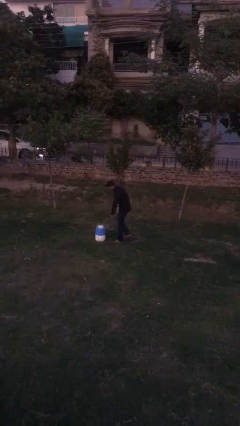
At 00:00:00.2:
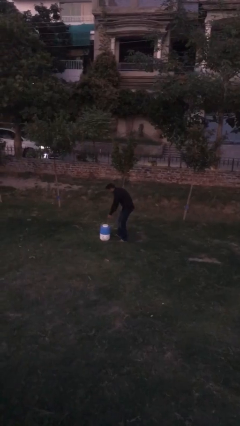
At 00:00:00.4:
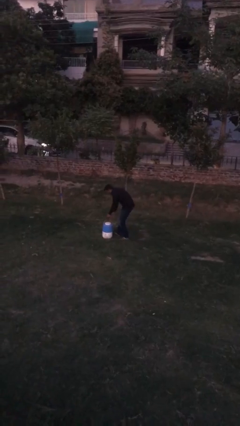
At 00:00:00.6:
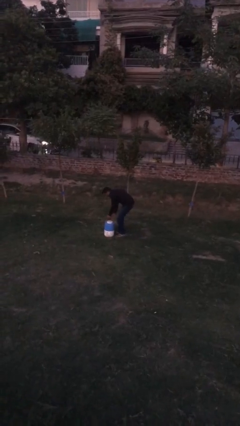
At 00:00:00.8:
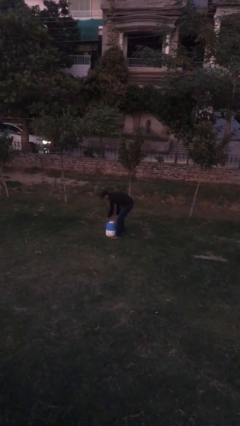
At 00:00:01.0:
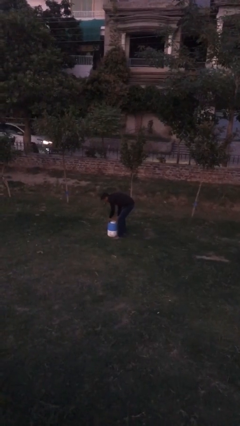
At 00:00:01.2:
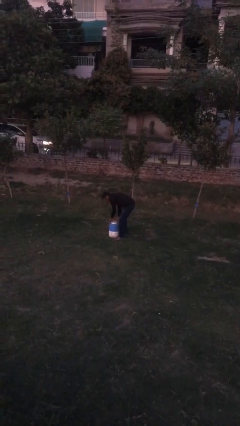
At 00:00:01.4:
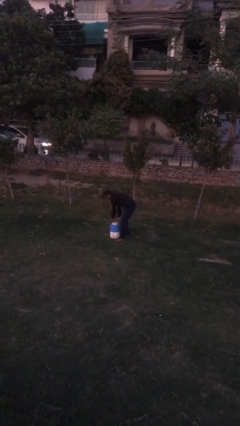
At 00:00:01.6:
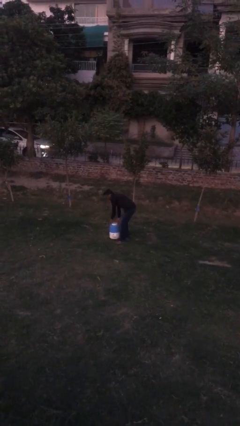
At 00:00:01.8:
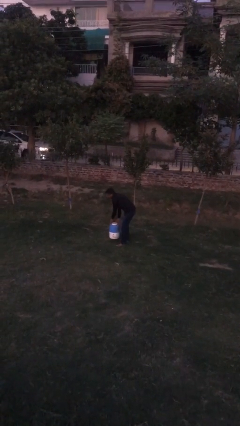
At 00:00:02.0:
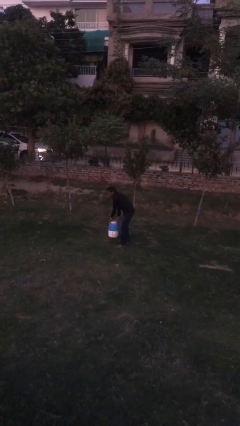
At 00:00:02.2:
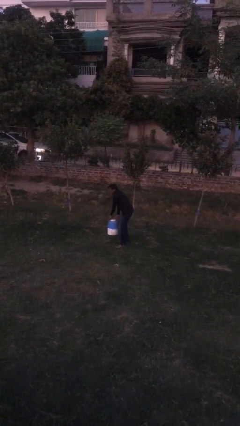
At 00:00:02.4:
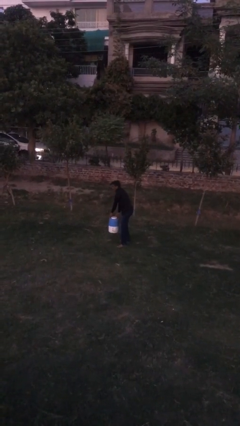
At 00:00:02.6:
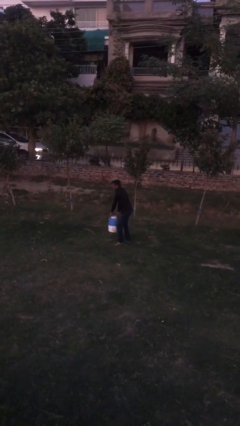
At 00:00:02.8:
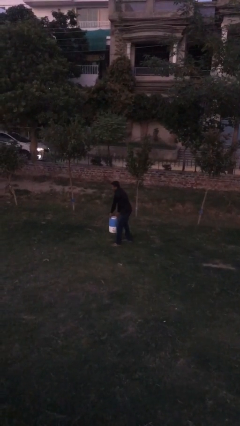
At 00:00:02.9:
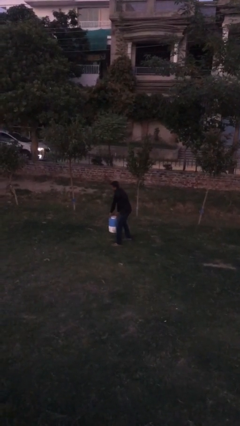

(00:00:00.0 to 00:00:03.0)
person picks up object from floor

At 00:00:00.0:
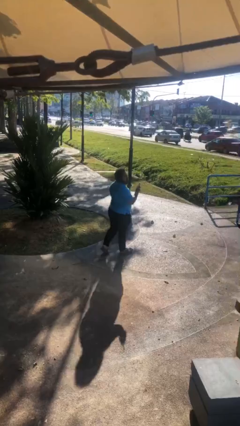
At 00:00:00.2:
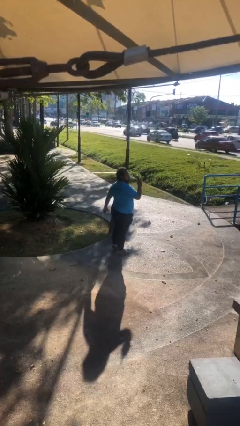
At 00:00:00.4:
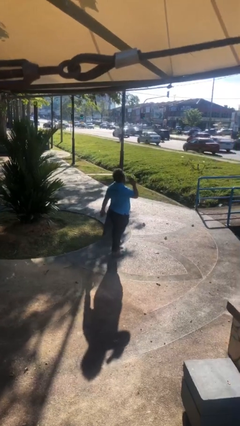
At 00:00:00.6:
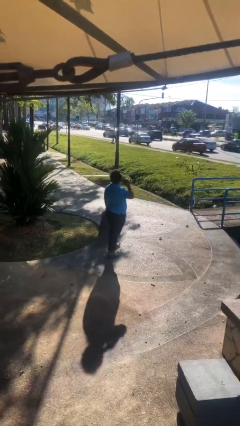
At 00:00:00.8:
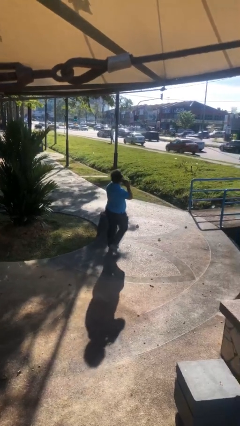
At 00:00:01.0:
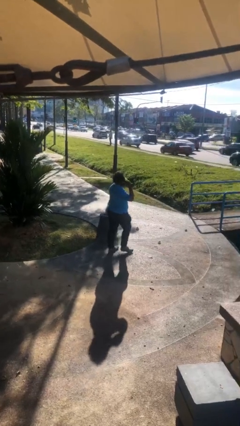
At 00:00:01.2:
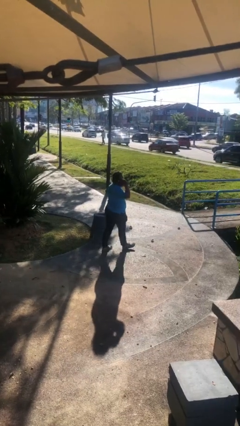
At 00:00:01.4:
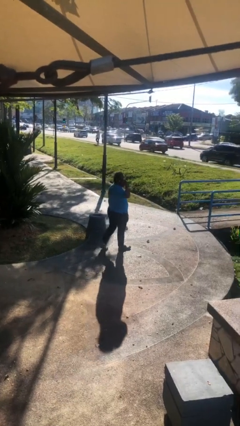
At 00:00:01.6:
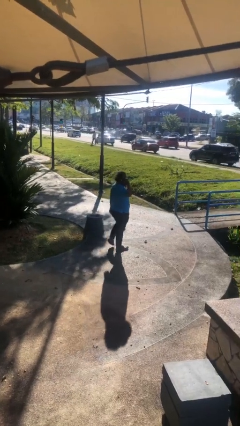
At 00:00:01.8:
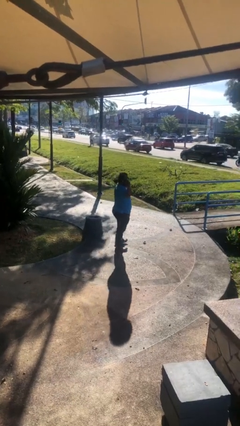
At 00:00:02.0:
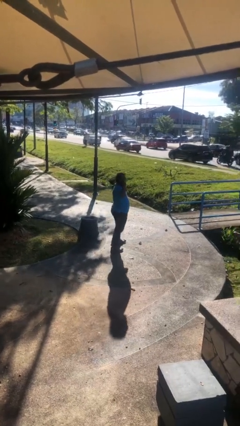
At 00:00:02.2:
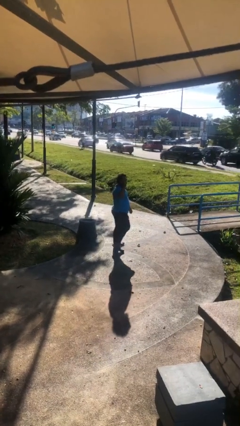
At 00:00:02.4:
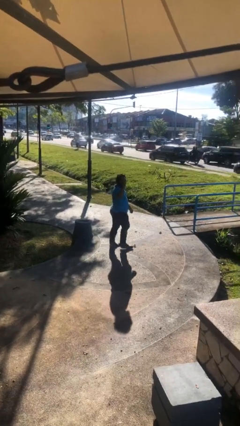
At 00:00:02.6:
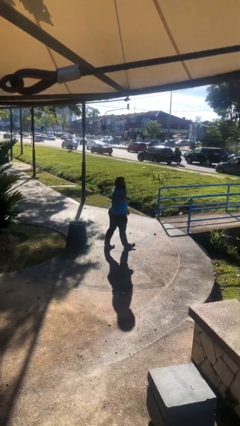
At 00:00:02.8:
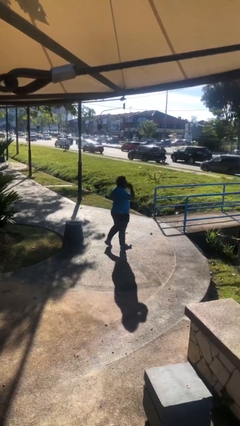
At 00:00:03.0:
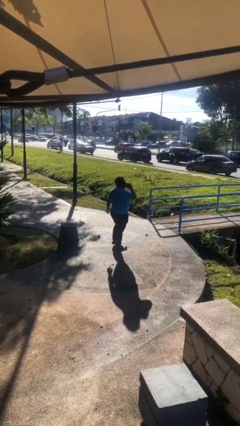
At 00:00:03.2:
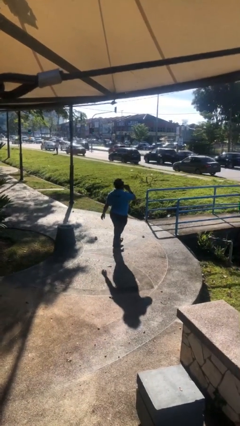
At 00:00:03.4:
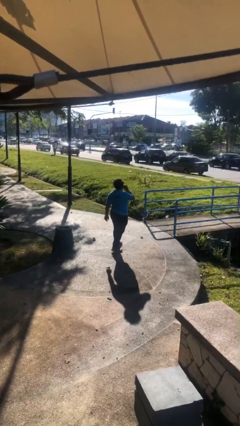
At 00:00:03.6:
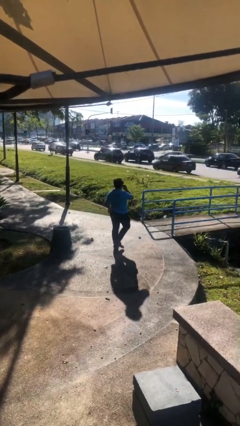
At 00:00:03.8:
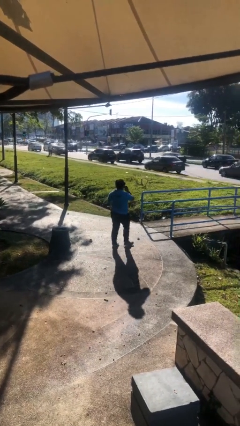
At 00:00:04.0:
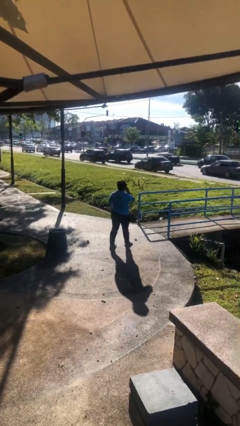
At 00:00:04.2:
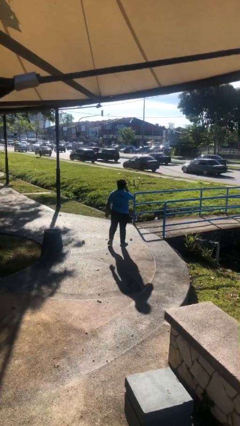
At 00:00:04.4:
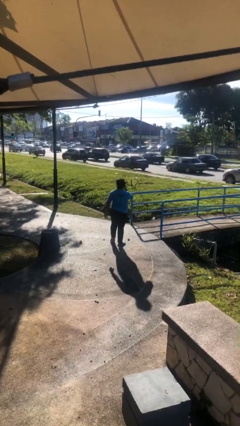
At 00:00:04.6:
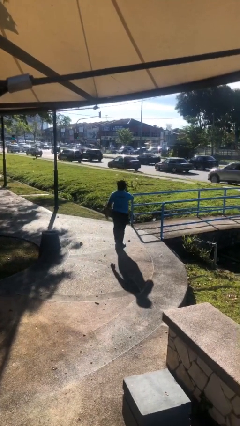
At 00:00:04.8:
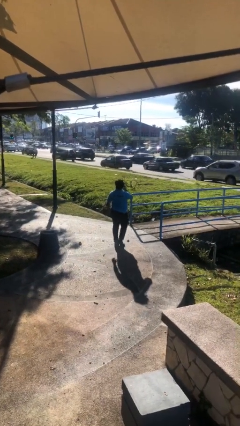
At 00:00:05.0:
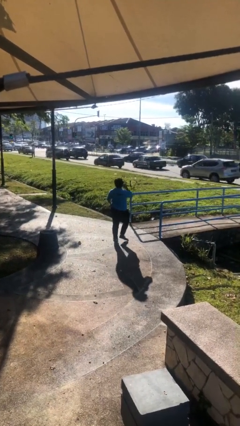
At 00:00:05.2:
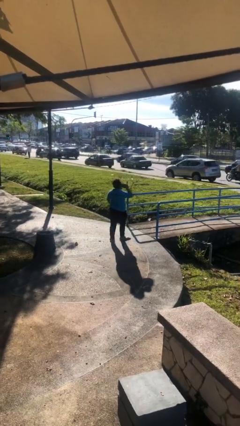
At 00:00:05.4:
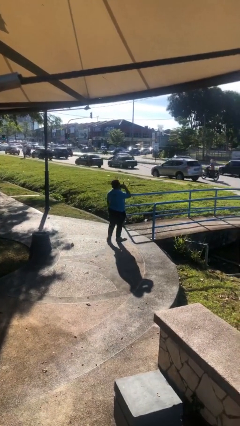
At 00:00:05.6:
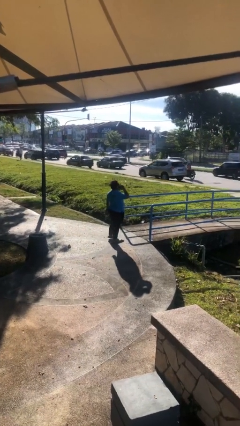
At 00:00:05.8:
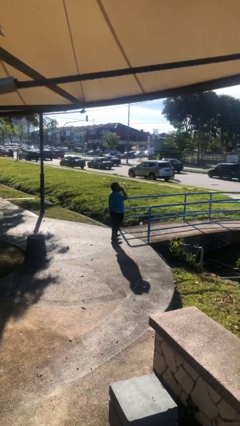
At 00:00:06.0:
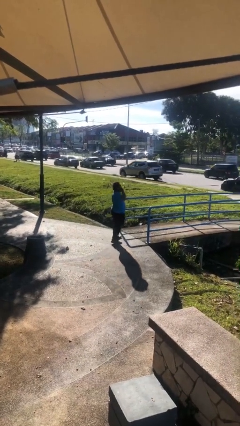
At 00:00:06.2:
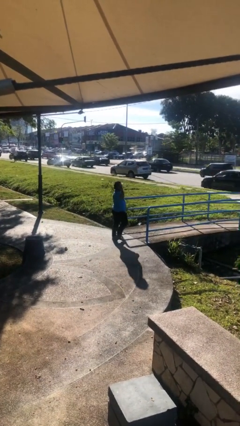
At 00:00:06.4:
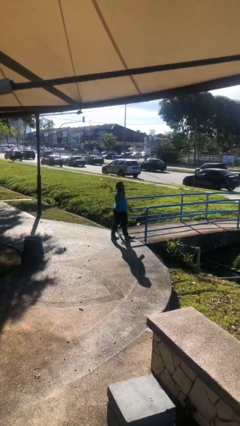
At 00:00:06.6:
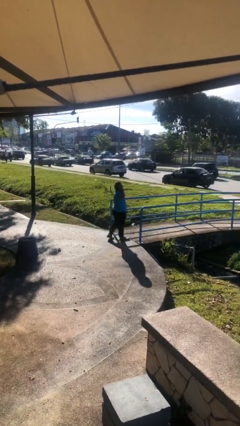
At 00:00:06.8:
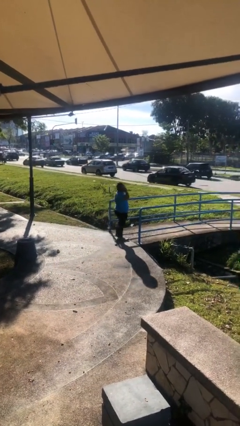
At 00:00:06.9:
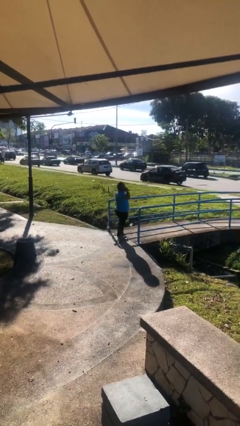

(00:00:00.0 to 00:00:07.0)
person talks on phone

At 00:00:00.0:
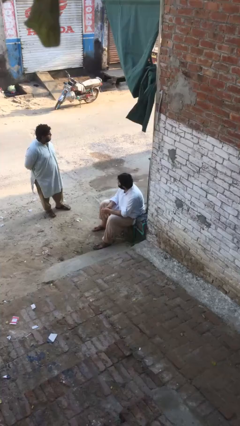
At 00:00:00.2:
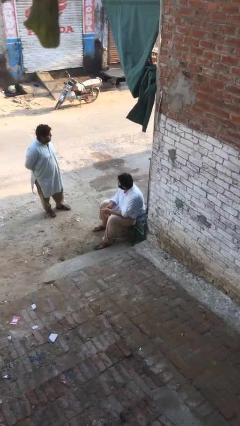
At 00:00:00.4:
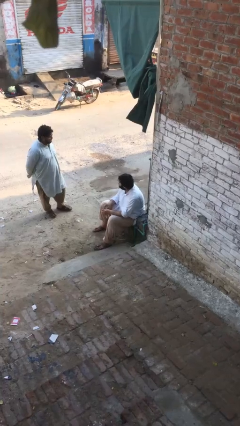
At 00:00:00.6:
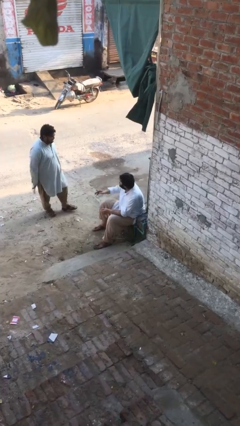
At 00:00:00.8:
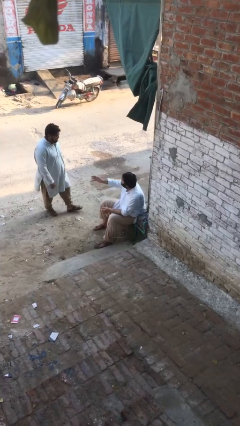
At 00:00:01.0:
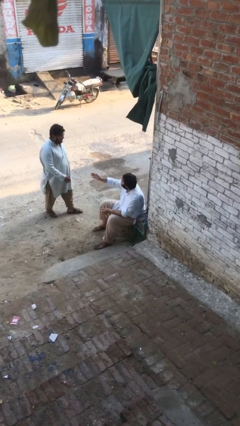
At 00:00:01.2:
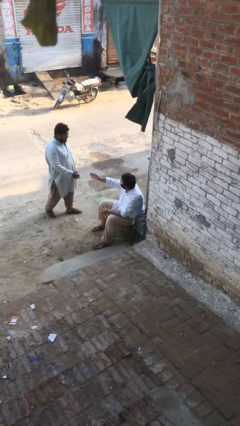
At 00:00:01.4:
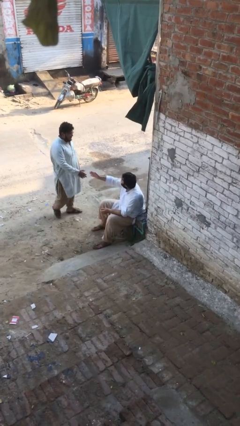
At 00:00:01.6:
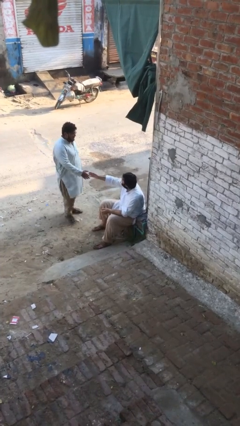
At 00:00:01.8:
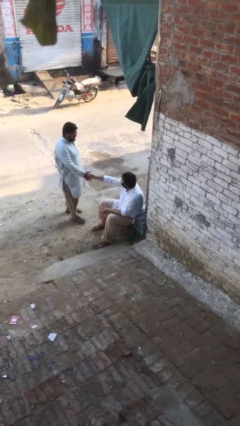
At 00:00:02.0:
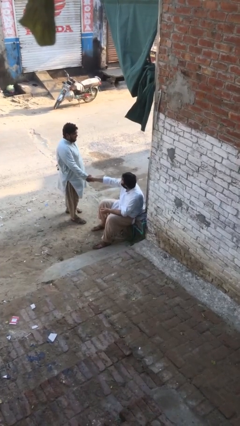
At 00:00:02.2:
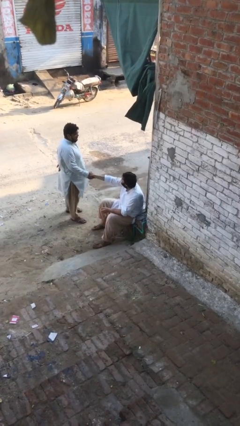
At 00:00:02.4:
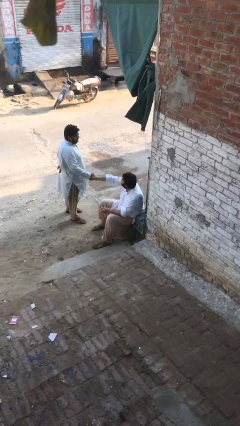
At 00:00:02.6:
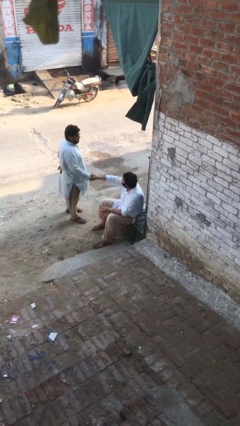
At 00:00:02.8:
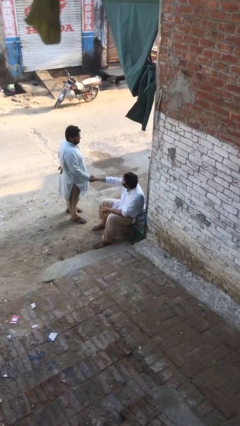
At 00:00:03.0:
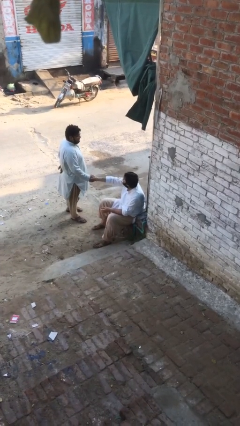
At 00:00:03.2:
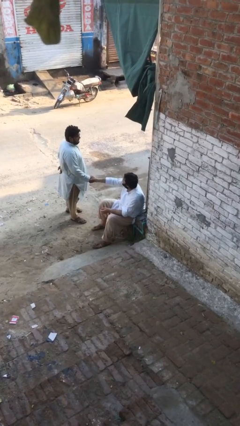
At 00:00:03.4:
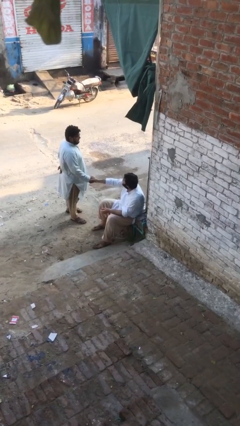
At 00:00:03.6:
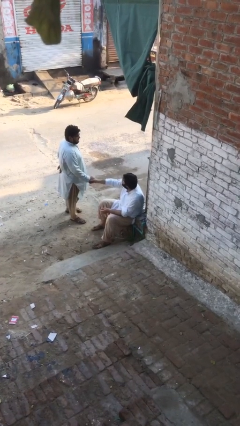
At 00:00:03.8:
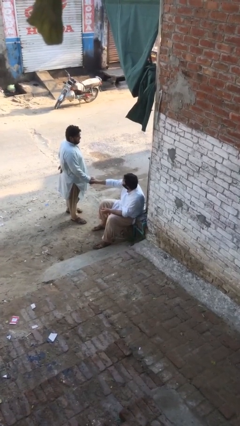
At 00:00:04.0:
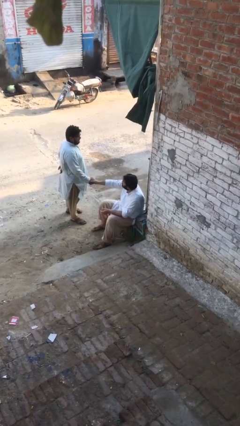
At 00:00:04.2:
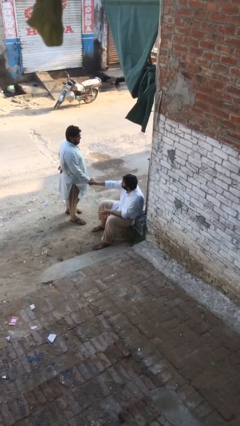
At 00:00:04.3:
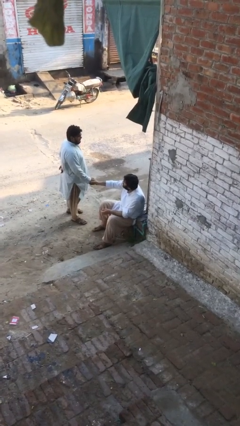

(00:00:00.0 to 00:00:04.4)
person shakes hand

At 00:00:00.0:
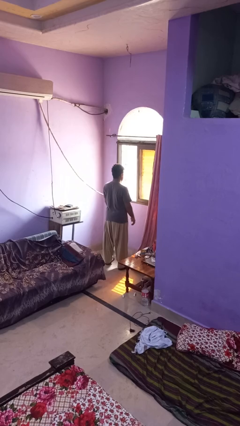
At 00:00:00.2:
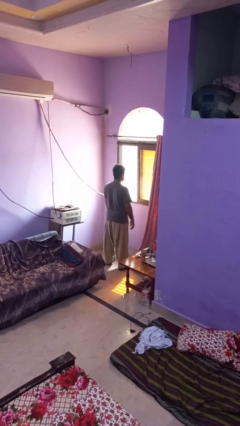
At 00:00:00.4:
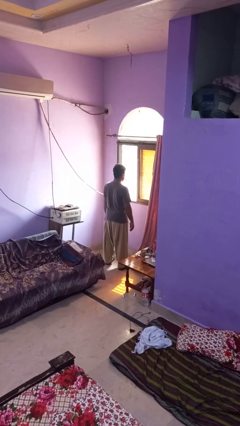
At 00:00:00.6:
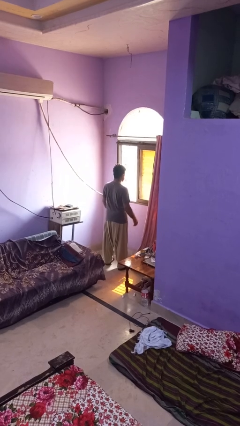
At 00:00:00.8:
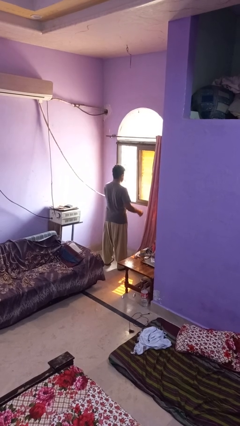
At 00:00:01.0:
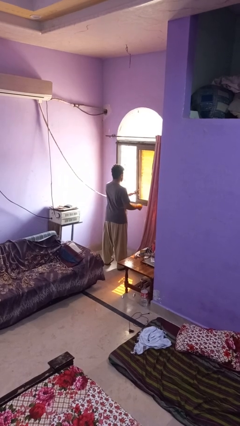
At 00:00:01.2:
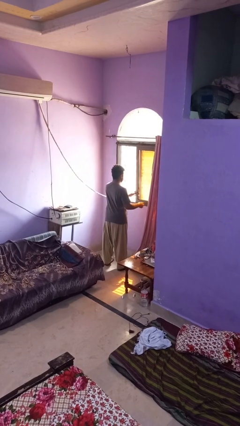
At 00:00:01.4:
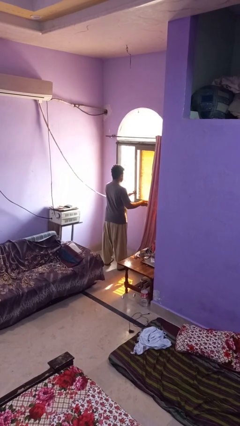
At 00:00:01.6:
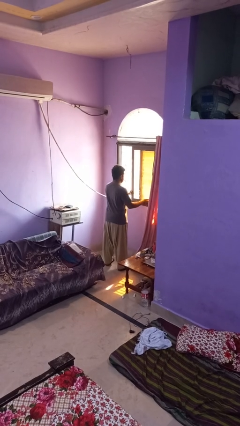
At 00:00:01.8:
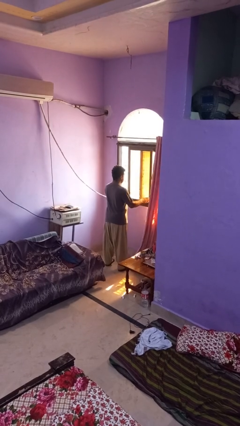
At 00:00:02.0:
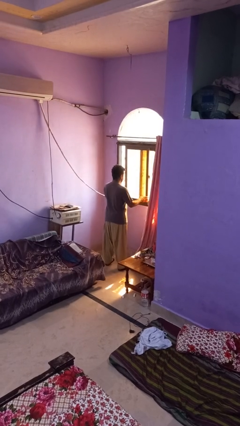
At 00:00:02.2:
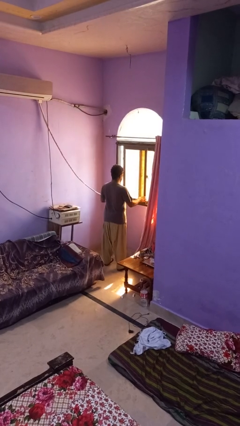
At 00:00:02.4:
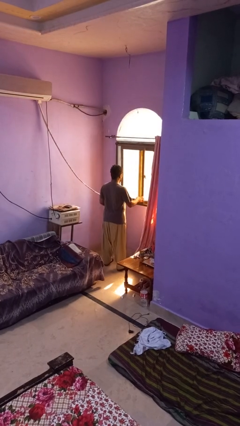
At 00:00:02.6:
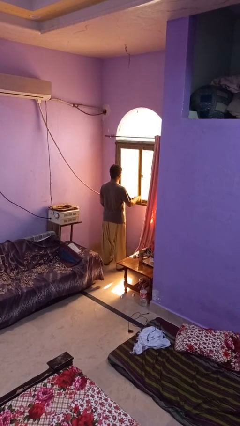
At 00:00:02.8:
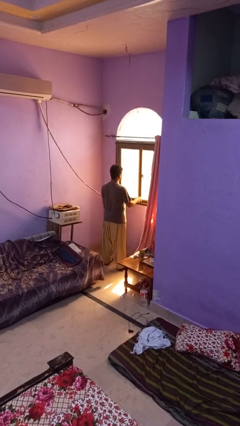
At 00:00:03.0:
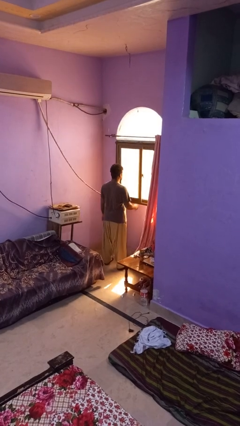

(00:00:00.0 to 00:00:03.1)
person closes home window
